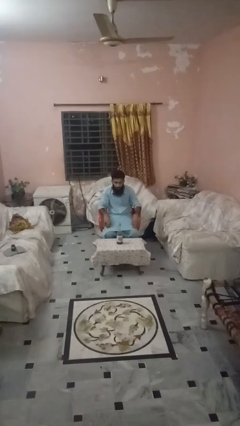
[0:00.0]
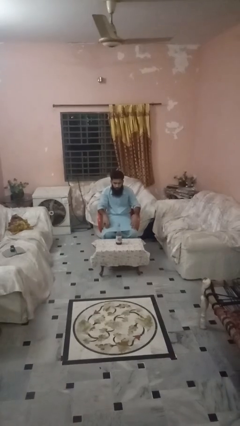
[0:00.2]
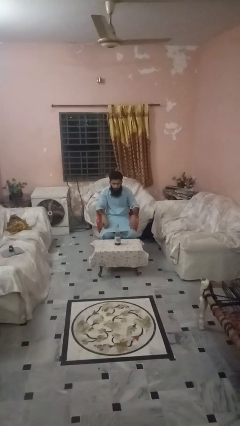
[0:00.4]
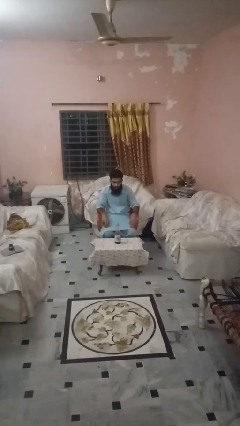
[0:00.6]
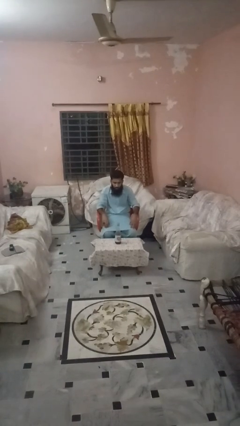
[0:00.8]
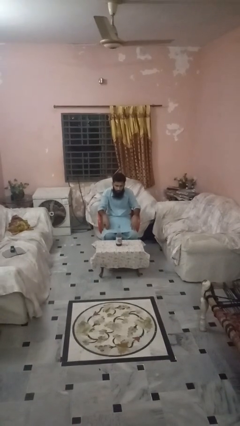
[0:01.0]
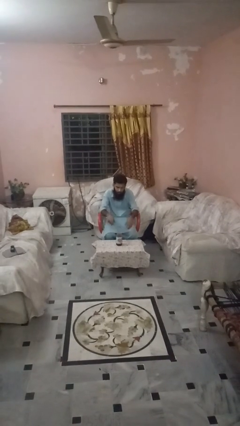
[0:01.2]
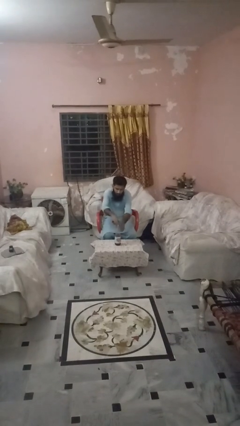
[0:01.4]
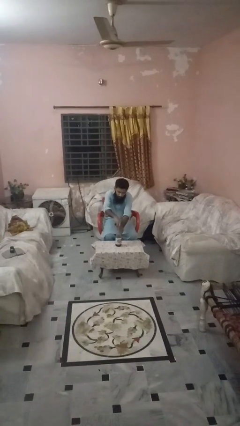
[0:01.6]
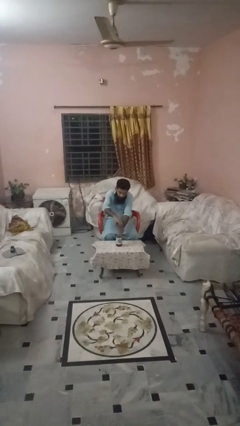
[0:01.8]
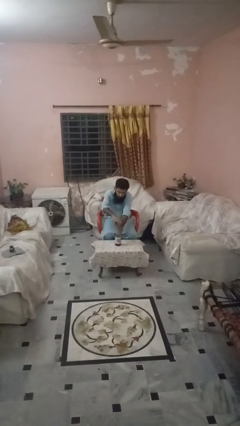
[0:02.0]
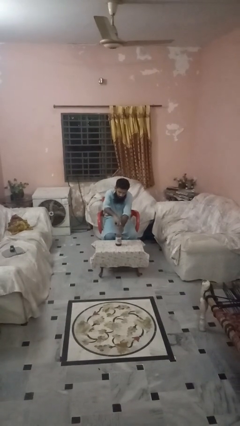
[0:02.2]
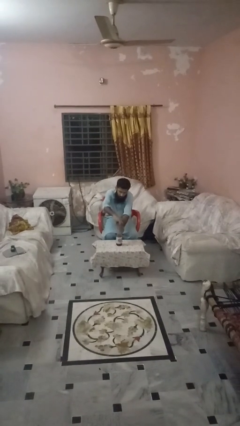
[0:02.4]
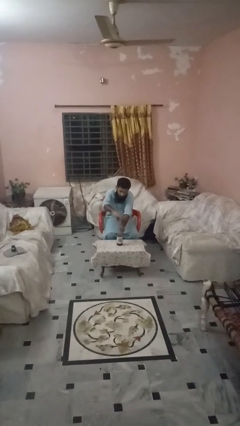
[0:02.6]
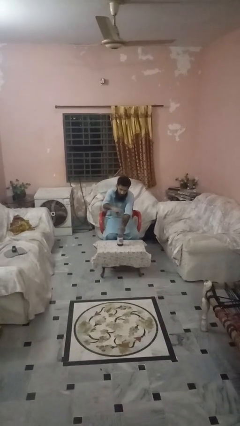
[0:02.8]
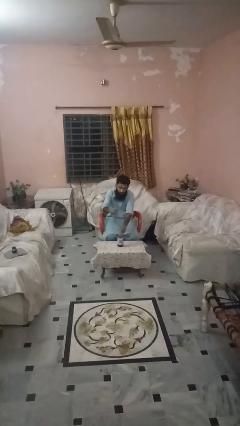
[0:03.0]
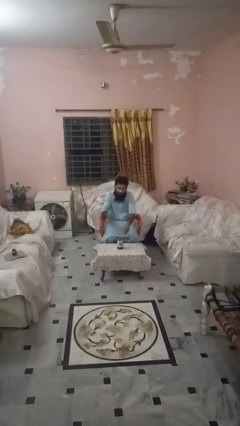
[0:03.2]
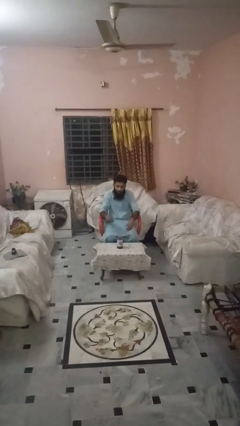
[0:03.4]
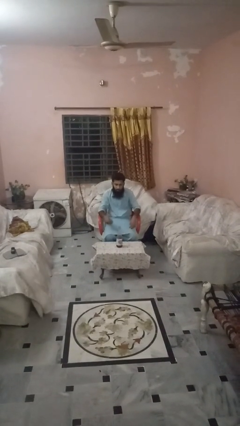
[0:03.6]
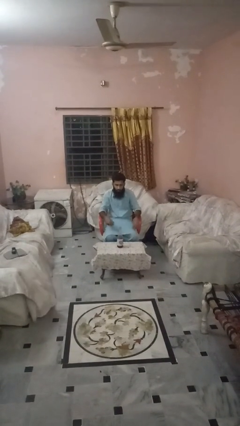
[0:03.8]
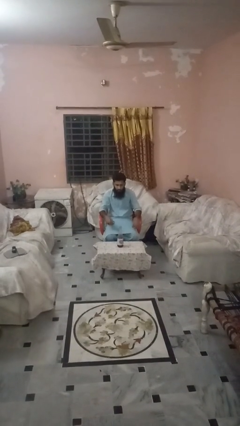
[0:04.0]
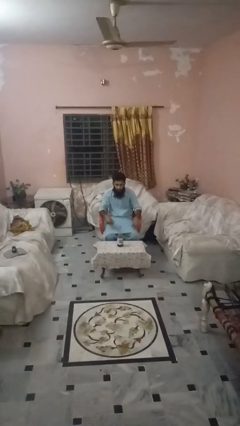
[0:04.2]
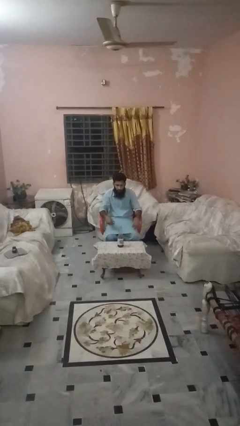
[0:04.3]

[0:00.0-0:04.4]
person unscrews lid from bottle

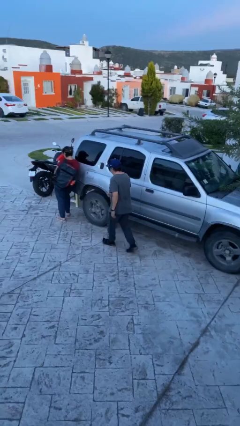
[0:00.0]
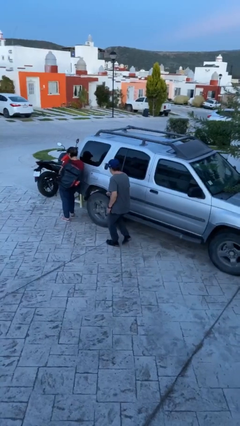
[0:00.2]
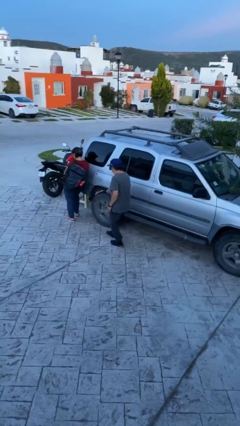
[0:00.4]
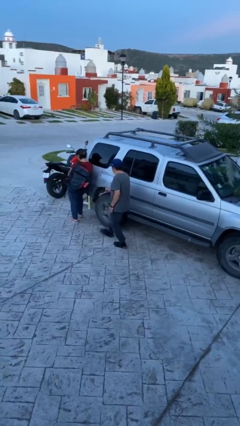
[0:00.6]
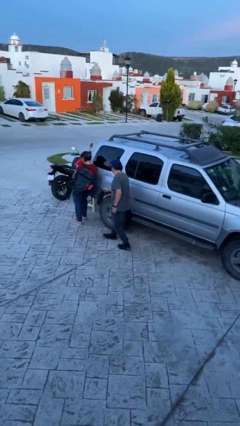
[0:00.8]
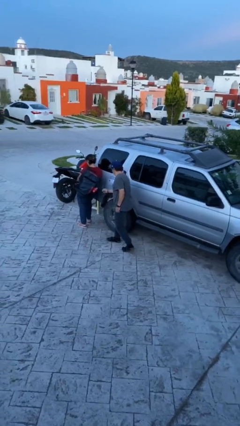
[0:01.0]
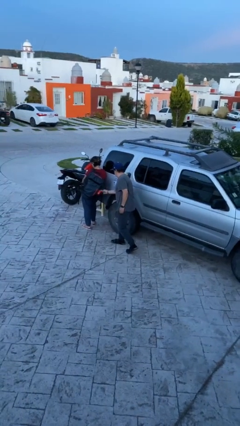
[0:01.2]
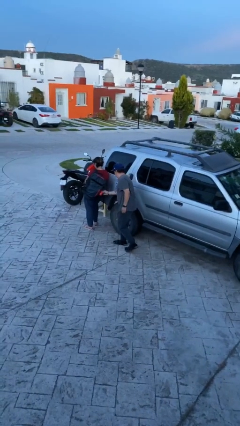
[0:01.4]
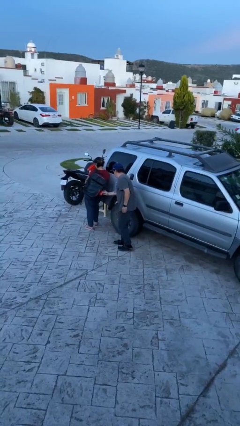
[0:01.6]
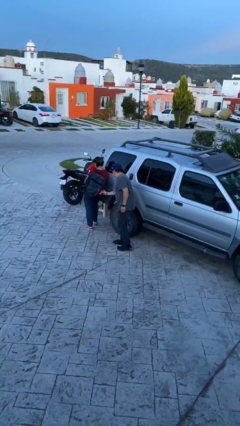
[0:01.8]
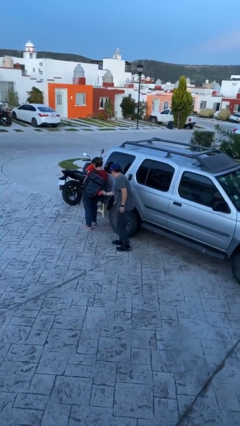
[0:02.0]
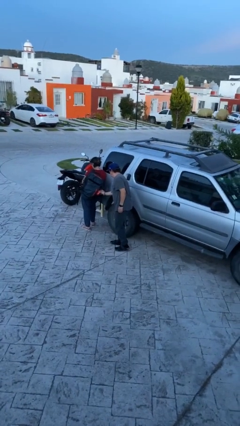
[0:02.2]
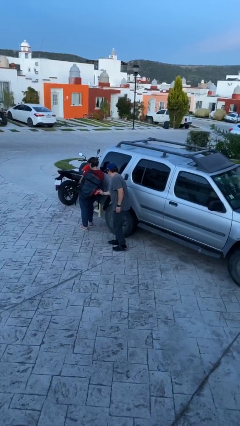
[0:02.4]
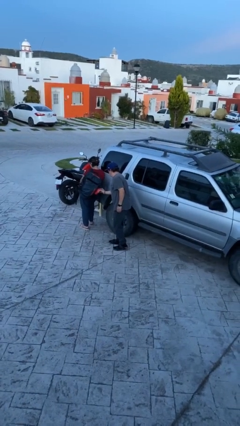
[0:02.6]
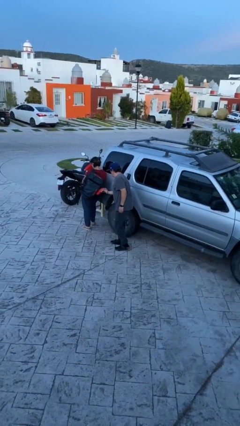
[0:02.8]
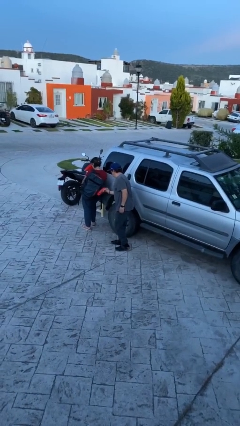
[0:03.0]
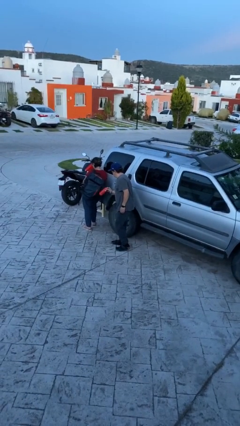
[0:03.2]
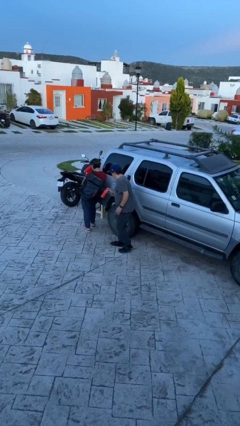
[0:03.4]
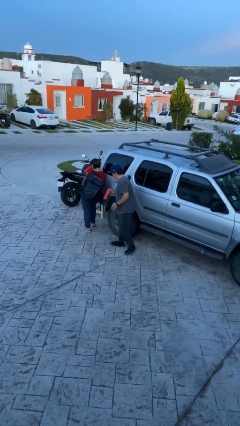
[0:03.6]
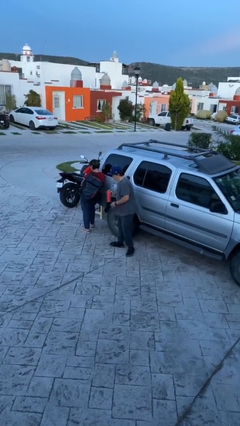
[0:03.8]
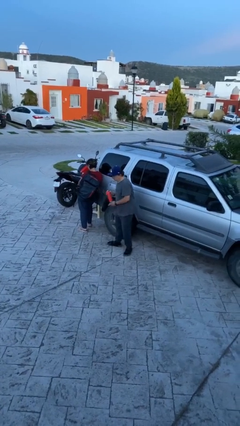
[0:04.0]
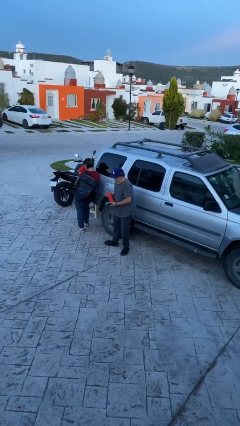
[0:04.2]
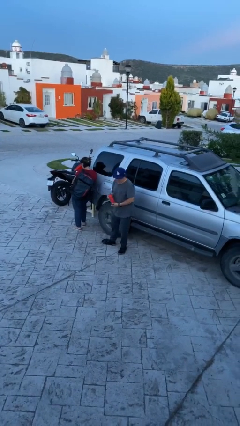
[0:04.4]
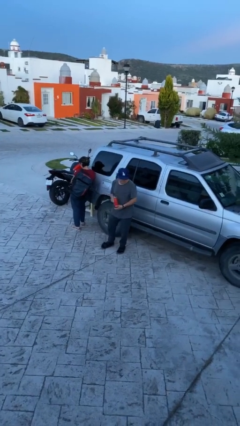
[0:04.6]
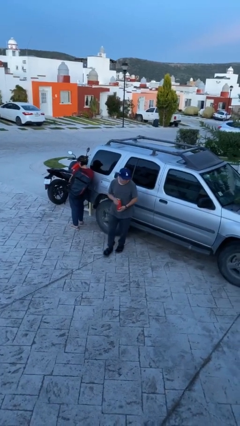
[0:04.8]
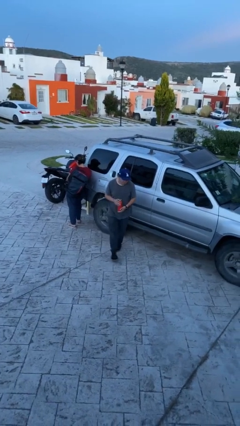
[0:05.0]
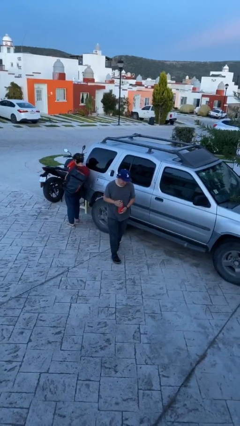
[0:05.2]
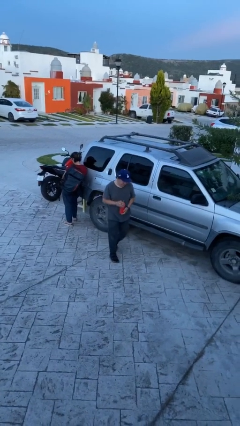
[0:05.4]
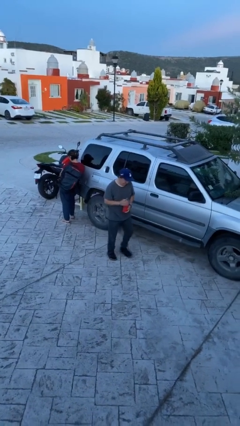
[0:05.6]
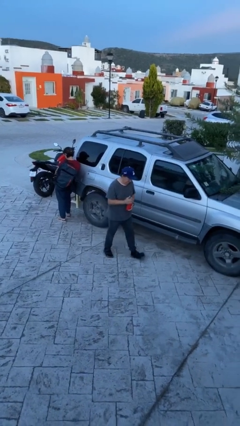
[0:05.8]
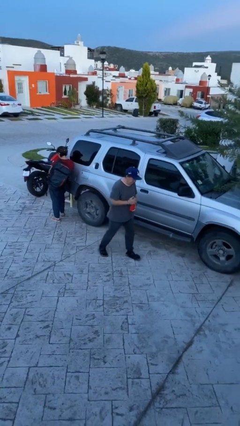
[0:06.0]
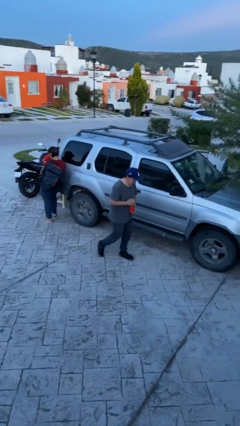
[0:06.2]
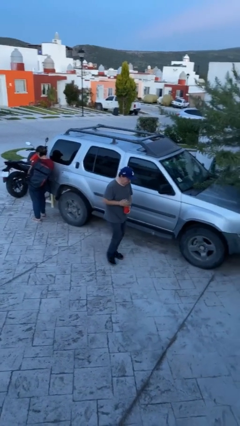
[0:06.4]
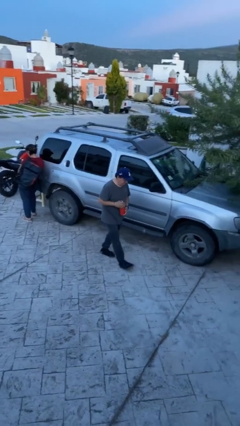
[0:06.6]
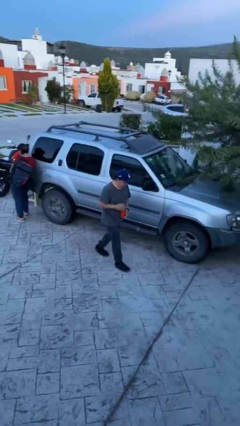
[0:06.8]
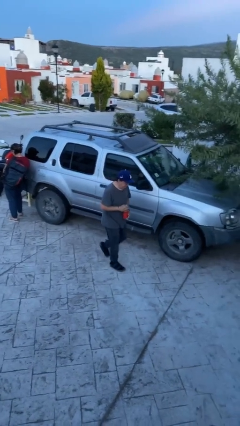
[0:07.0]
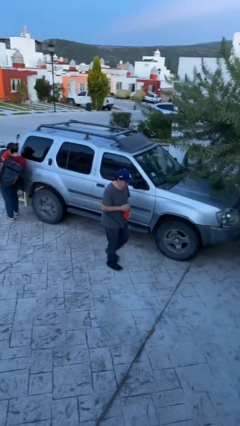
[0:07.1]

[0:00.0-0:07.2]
person steals object from person

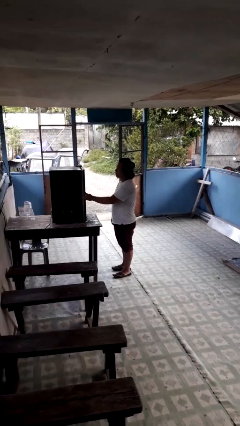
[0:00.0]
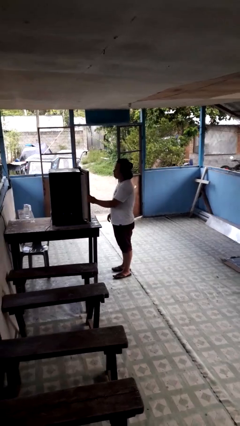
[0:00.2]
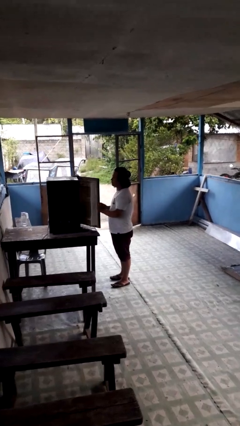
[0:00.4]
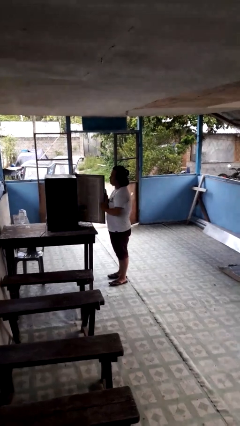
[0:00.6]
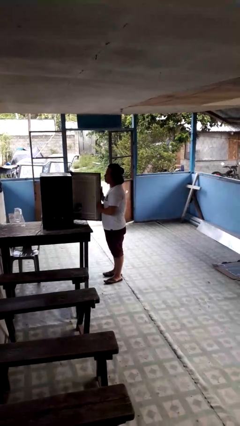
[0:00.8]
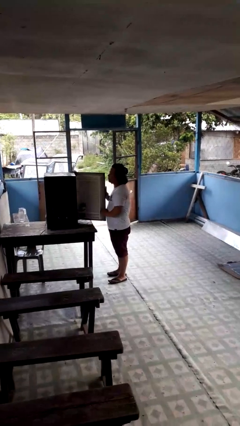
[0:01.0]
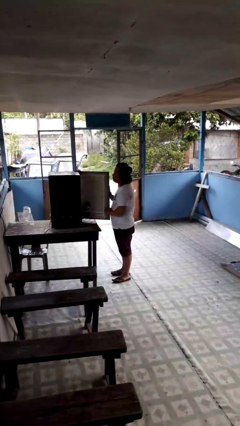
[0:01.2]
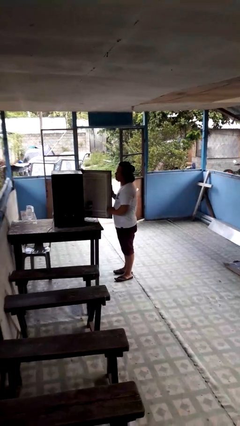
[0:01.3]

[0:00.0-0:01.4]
person opens refrigerator

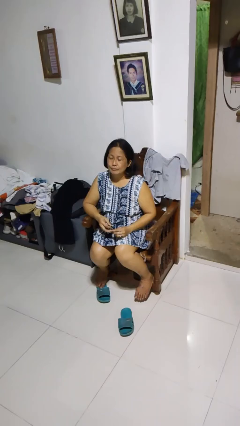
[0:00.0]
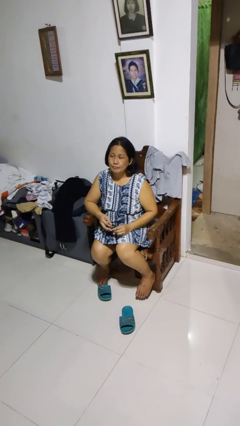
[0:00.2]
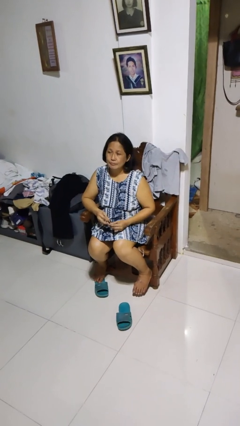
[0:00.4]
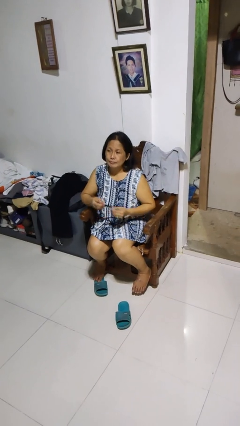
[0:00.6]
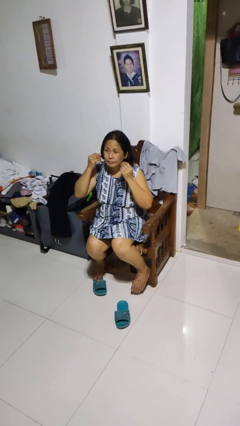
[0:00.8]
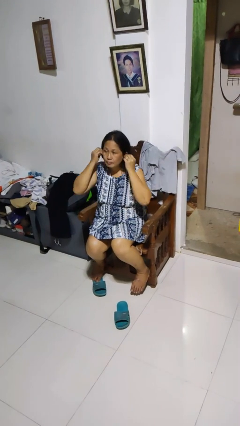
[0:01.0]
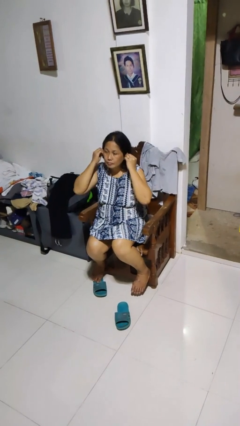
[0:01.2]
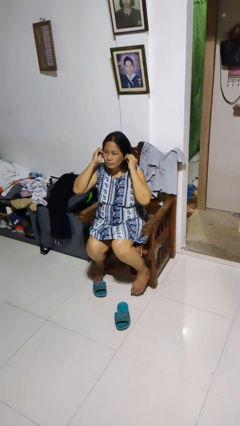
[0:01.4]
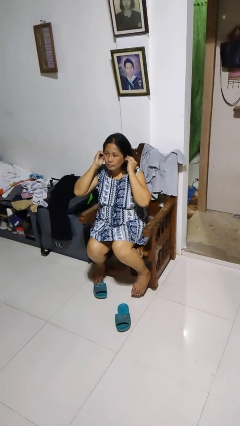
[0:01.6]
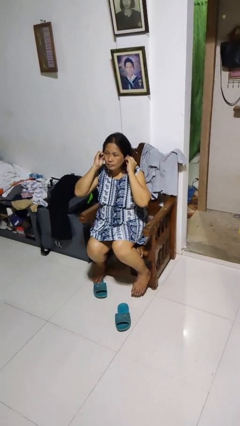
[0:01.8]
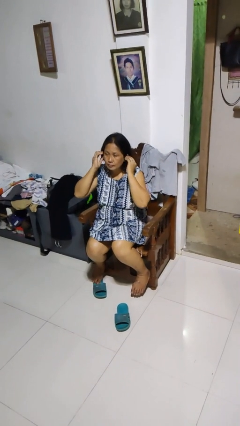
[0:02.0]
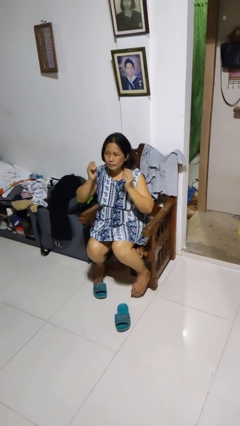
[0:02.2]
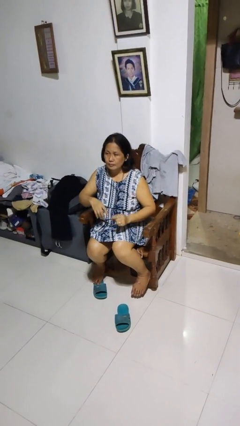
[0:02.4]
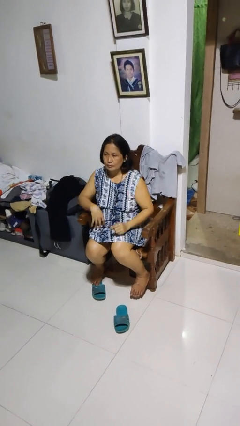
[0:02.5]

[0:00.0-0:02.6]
person puts on headphones

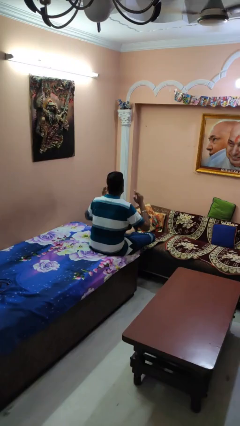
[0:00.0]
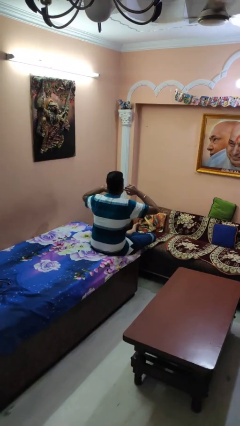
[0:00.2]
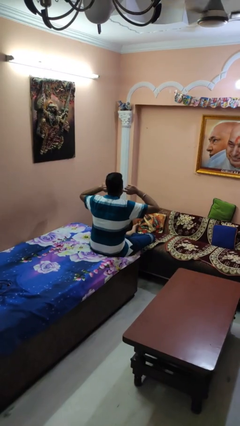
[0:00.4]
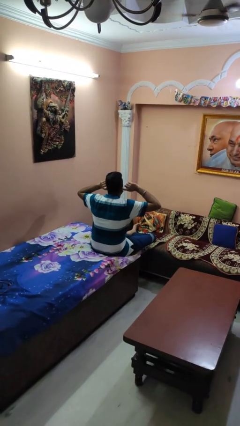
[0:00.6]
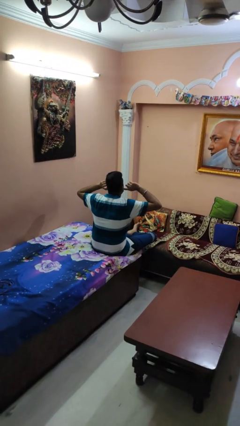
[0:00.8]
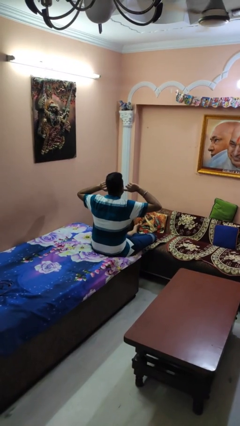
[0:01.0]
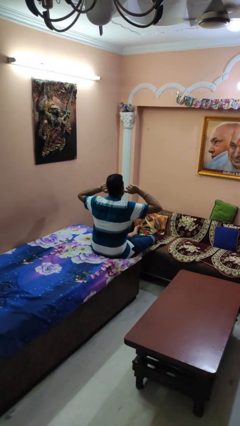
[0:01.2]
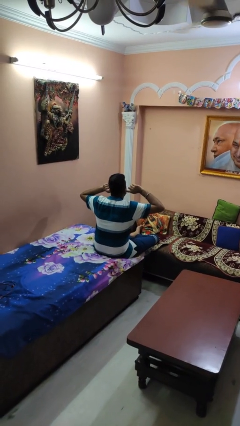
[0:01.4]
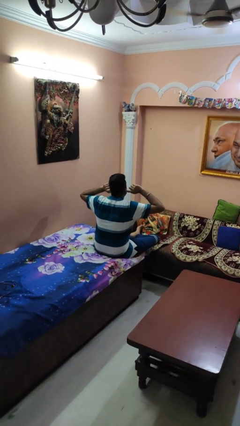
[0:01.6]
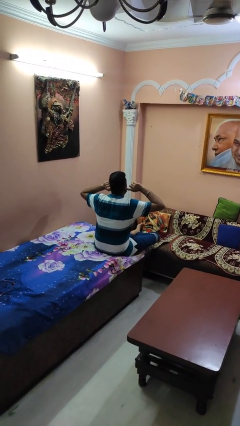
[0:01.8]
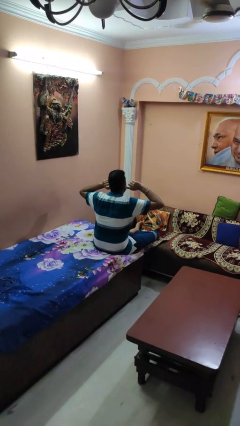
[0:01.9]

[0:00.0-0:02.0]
person puts fingers in ear
